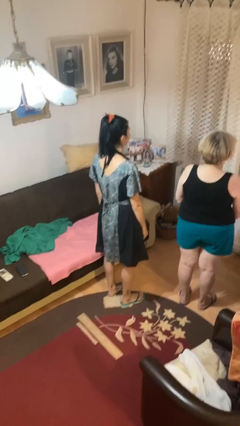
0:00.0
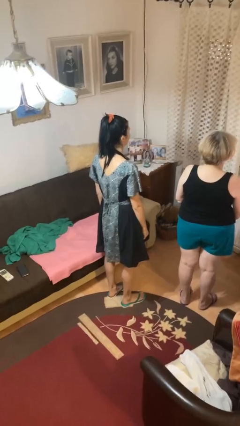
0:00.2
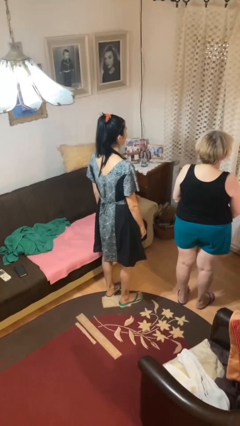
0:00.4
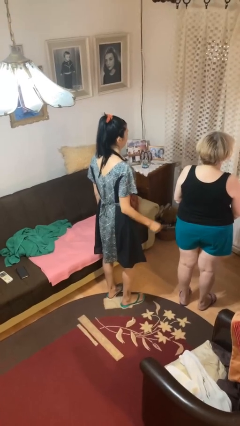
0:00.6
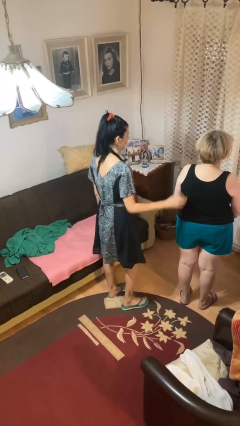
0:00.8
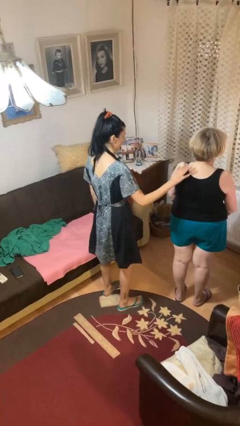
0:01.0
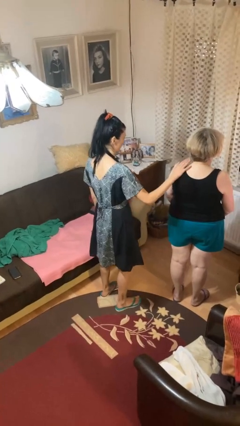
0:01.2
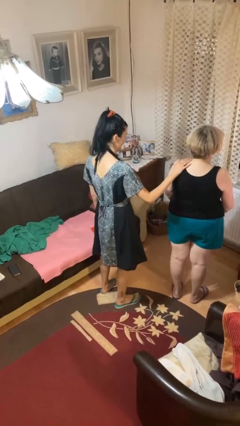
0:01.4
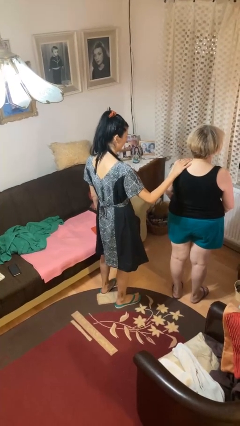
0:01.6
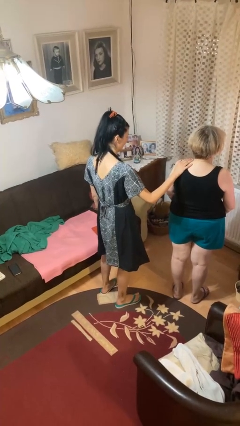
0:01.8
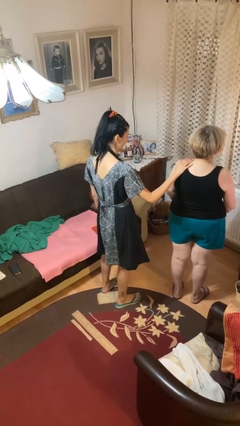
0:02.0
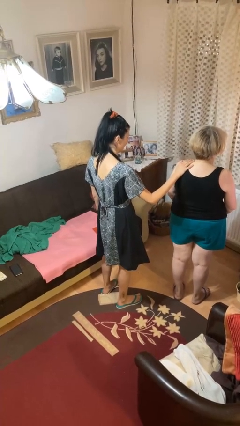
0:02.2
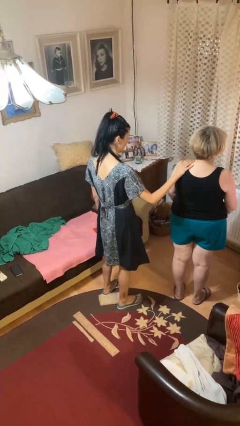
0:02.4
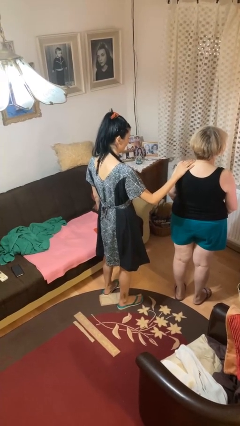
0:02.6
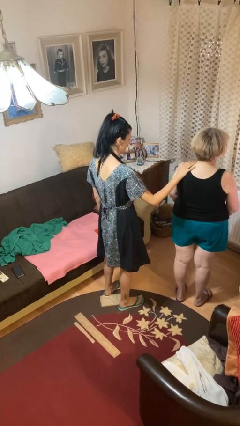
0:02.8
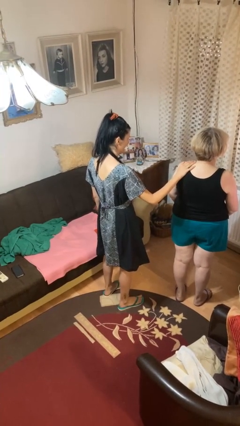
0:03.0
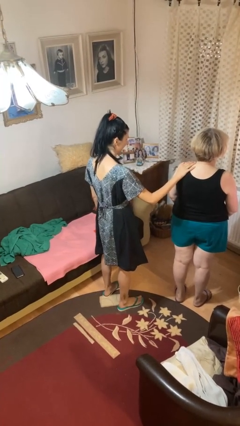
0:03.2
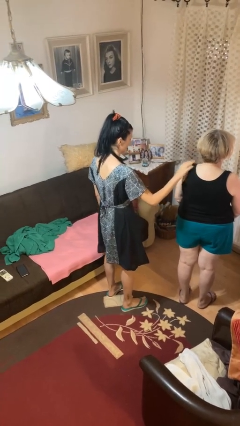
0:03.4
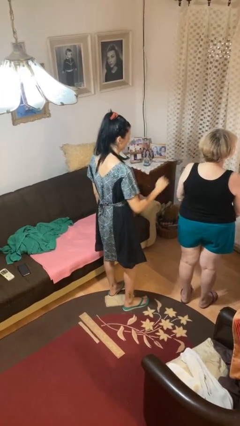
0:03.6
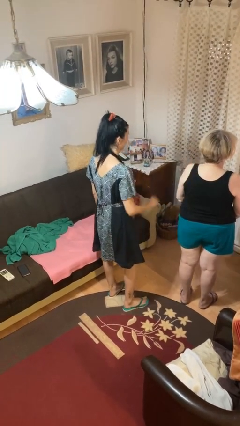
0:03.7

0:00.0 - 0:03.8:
person touches back of person

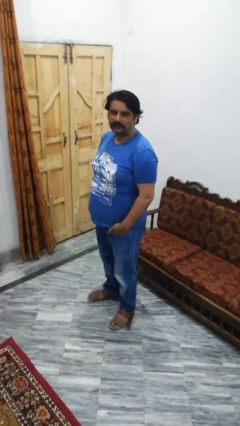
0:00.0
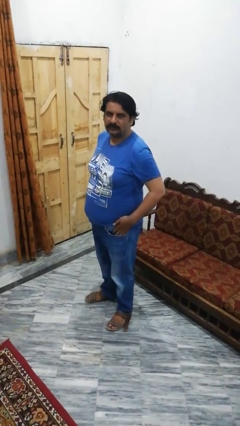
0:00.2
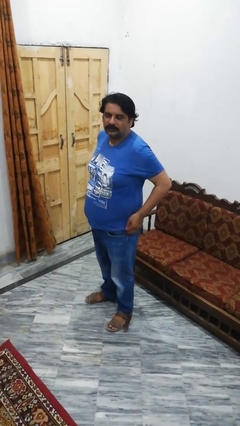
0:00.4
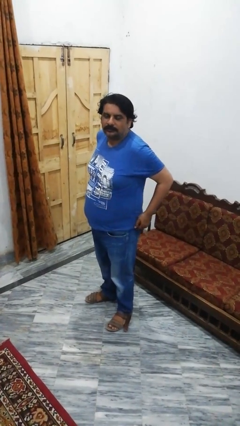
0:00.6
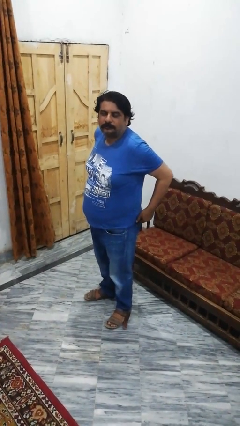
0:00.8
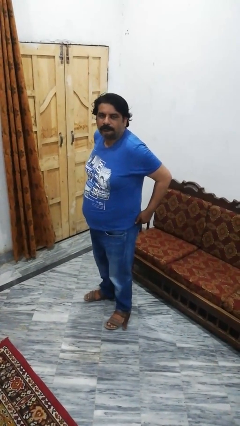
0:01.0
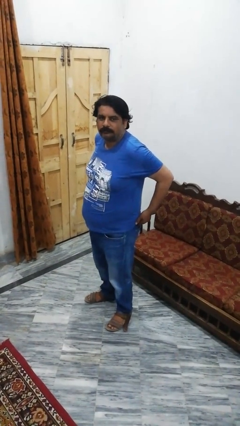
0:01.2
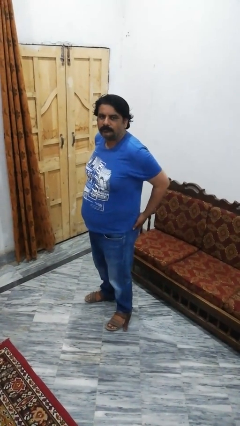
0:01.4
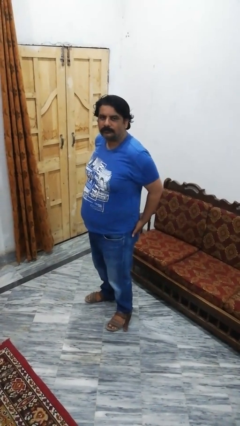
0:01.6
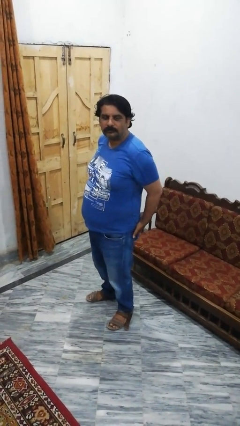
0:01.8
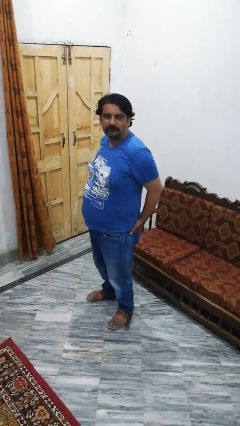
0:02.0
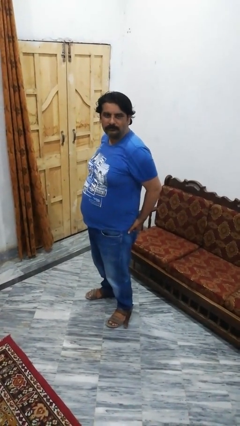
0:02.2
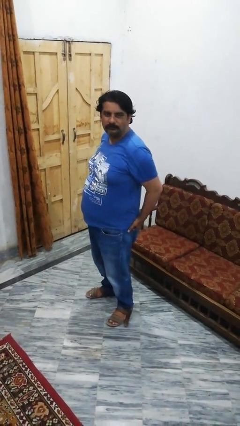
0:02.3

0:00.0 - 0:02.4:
person puts hands in back pockets

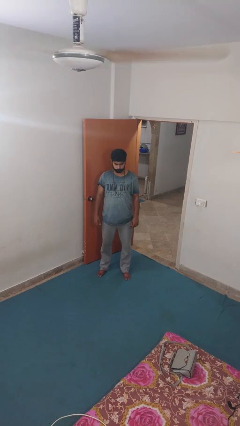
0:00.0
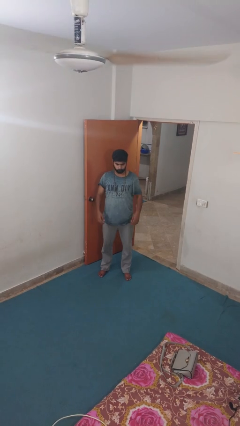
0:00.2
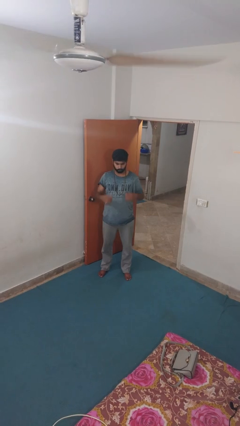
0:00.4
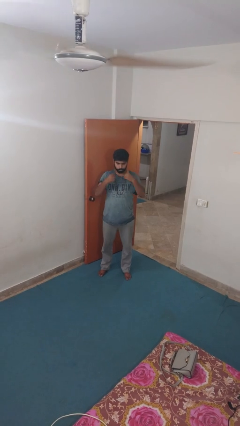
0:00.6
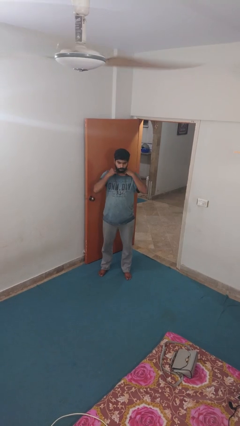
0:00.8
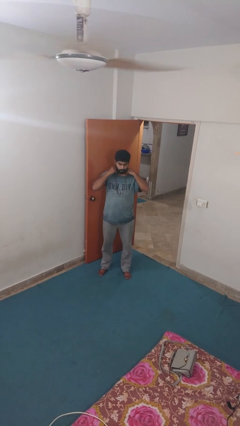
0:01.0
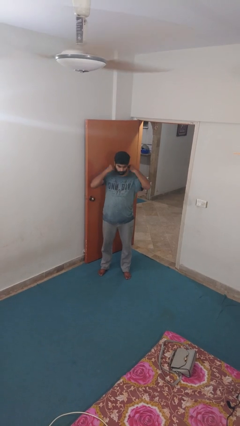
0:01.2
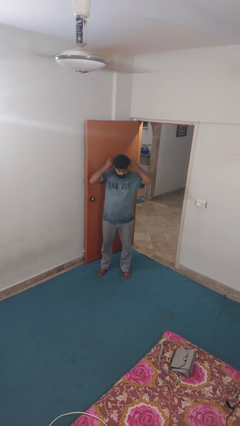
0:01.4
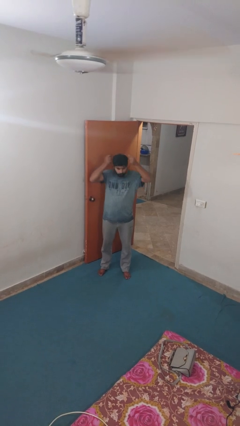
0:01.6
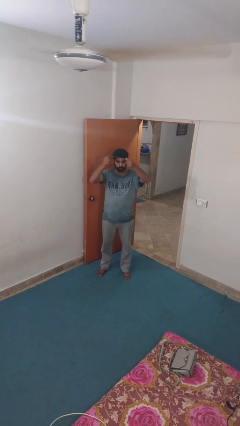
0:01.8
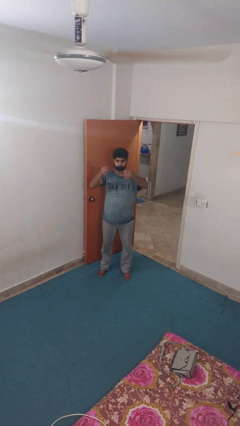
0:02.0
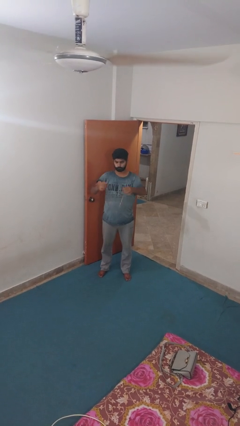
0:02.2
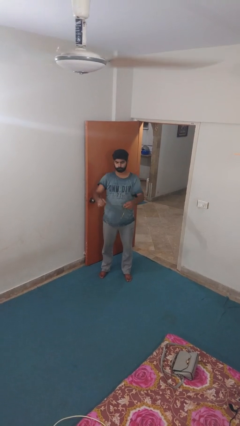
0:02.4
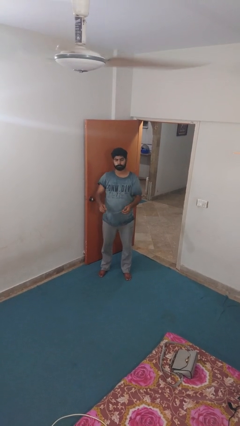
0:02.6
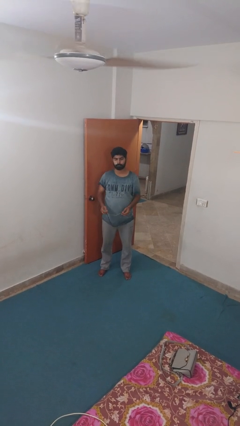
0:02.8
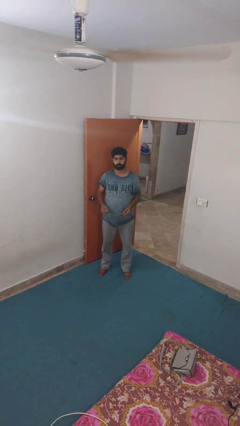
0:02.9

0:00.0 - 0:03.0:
person takes off necklace

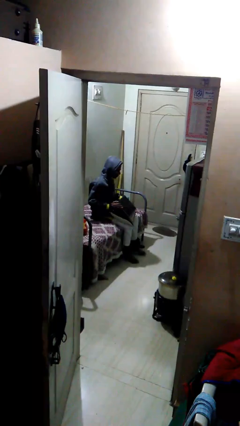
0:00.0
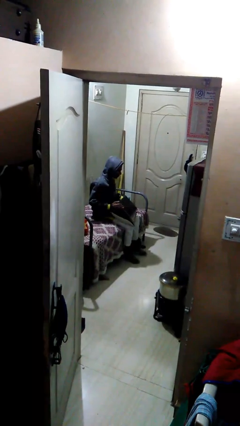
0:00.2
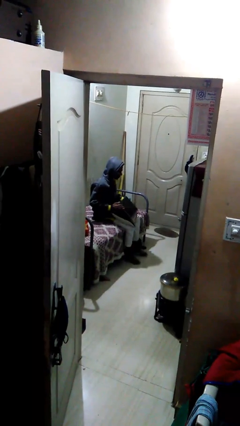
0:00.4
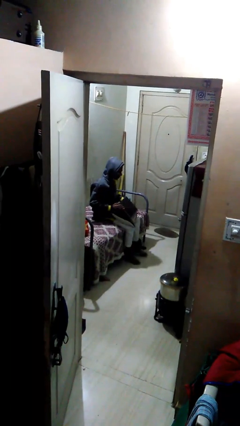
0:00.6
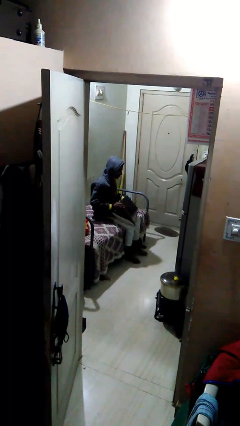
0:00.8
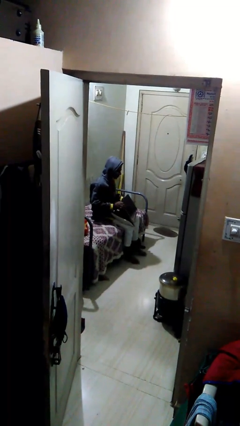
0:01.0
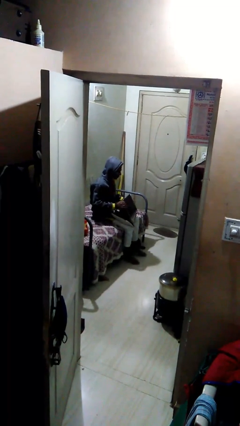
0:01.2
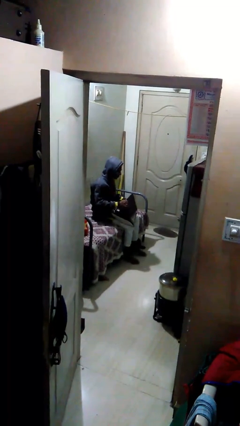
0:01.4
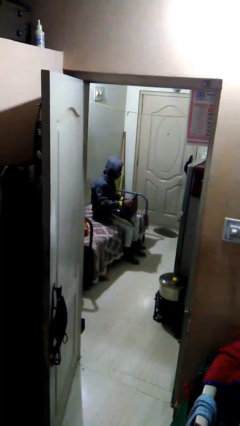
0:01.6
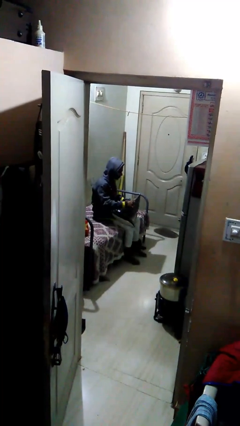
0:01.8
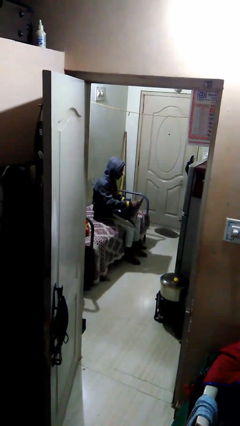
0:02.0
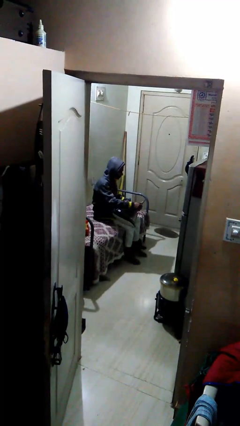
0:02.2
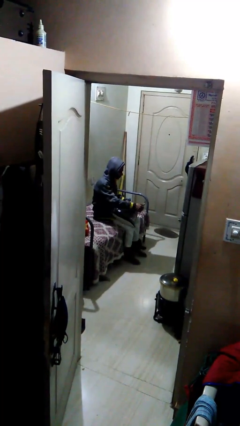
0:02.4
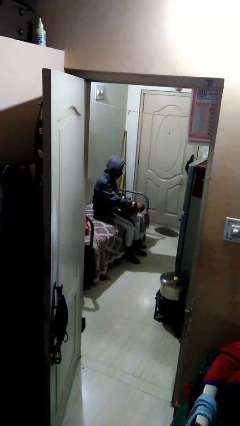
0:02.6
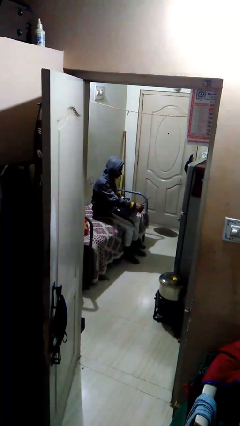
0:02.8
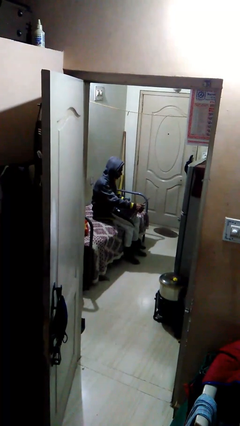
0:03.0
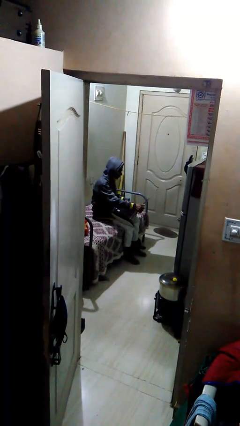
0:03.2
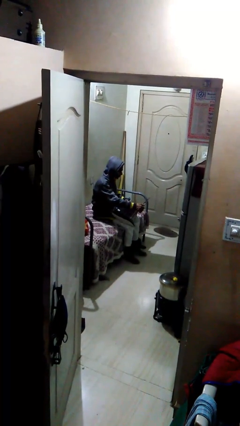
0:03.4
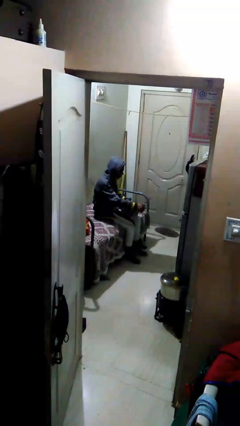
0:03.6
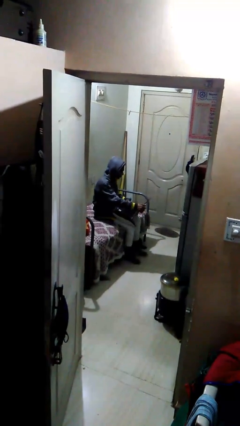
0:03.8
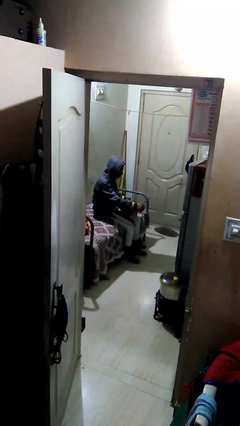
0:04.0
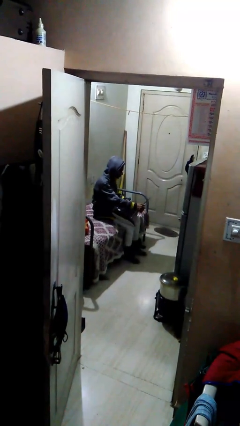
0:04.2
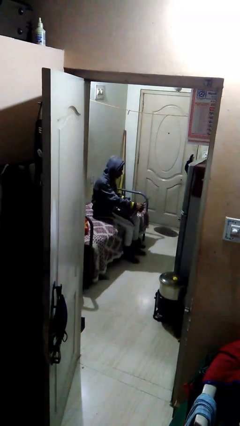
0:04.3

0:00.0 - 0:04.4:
person interacts with laptop

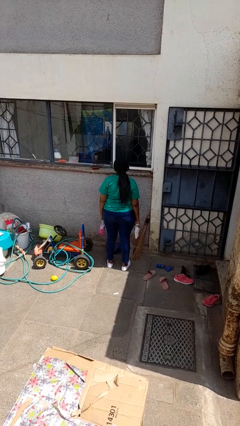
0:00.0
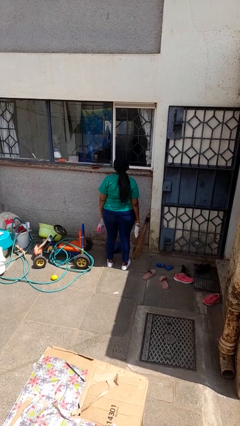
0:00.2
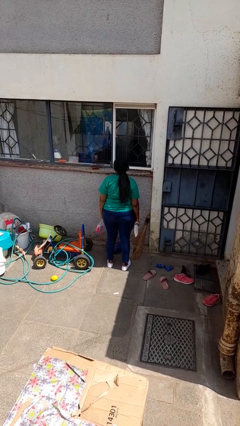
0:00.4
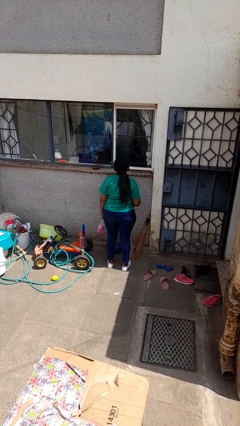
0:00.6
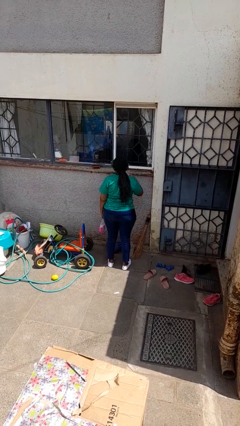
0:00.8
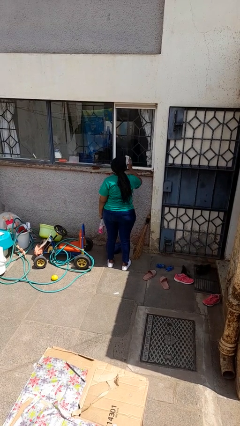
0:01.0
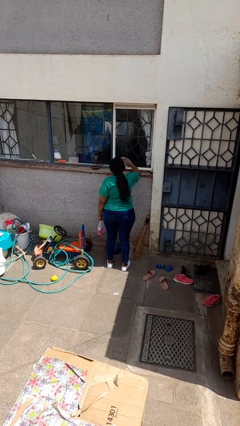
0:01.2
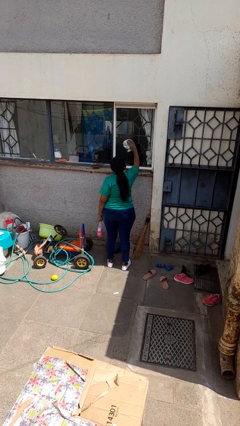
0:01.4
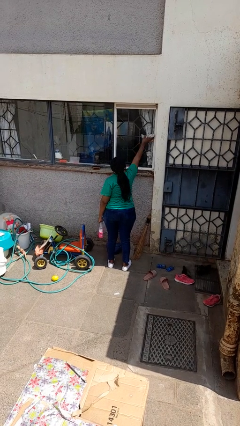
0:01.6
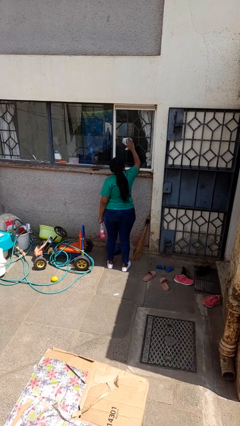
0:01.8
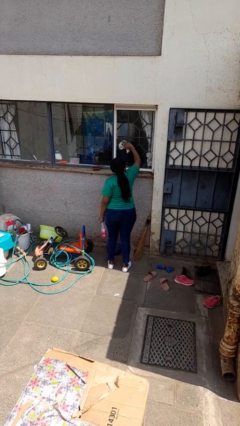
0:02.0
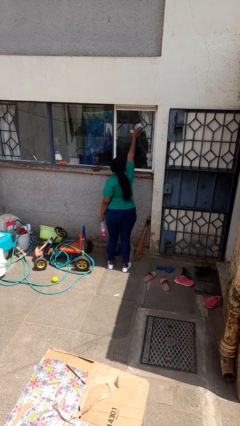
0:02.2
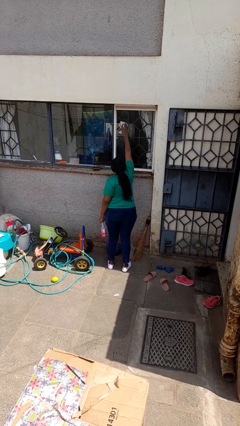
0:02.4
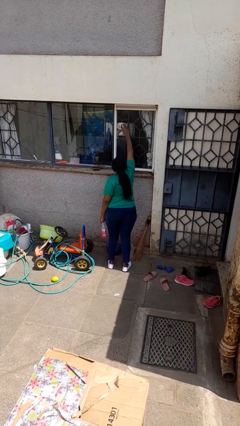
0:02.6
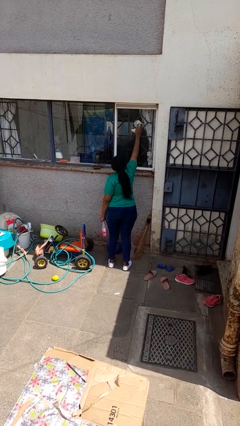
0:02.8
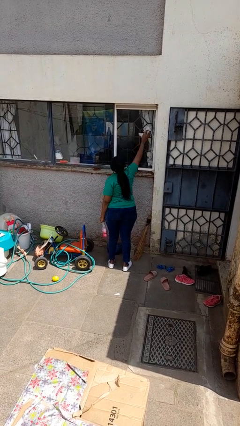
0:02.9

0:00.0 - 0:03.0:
person washes window

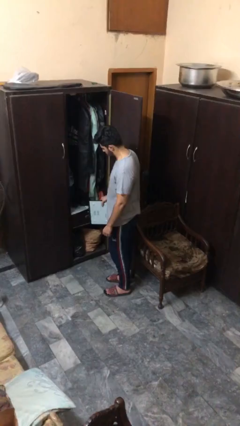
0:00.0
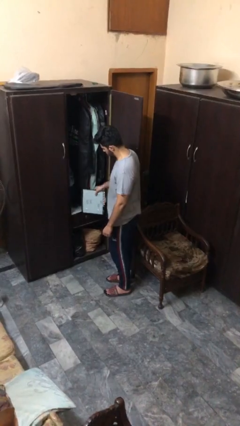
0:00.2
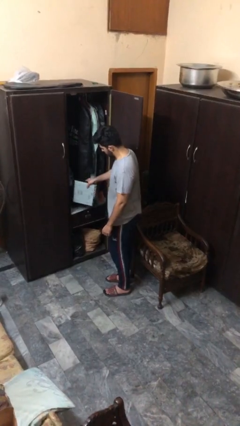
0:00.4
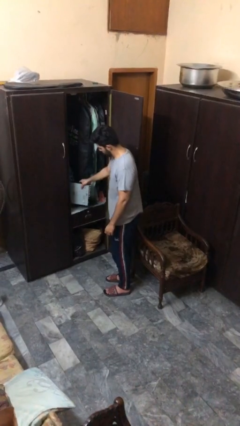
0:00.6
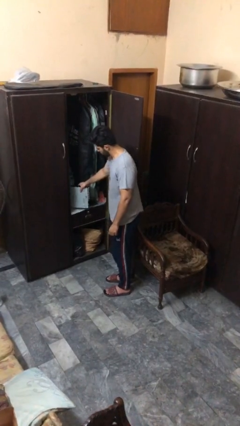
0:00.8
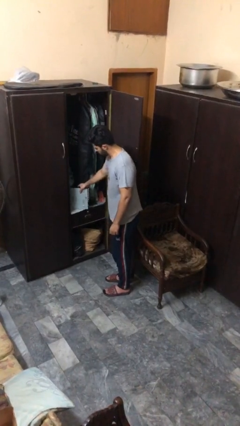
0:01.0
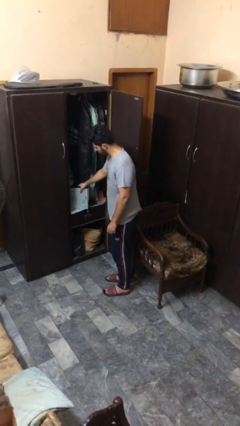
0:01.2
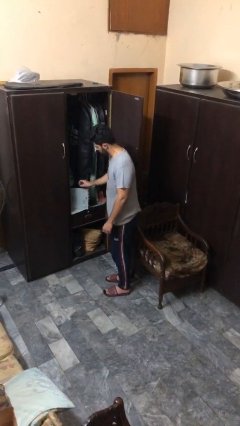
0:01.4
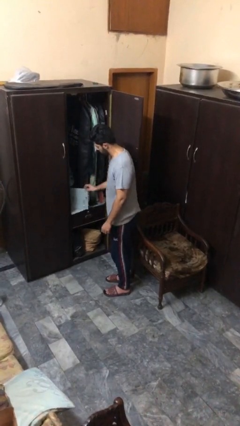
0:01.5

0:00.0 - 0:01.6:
person puts down object on countertop
